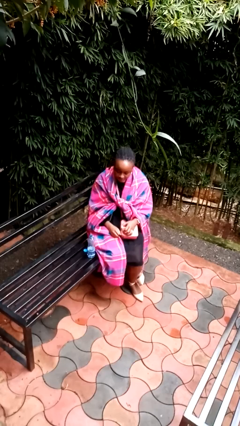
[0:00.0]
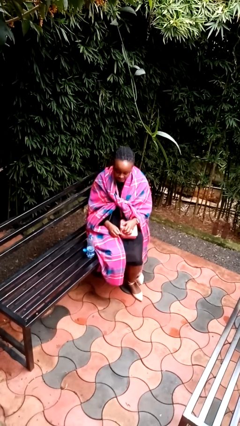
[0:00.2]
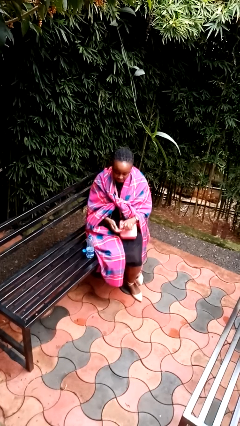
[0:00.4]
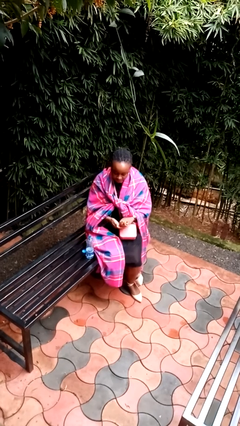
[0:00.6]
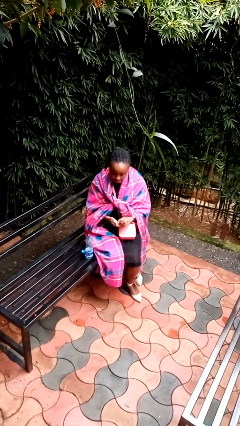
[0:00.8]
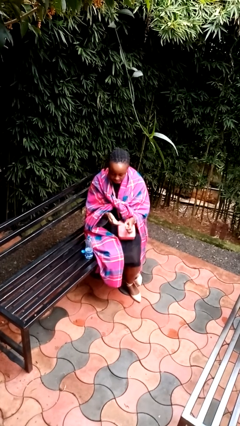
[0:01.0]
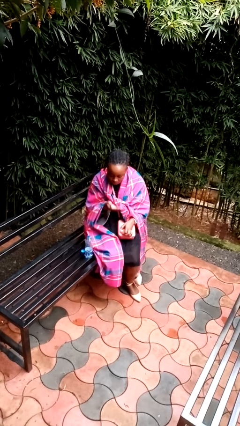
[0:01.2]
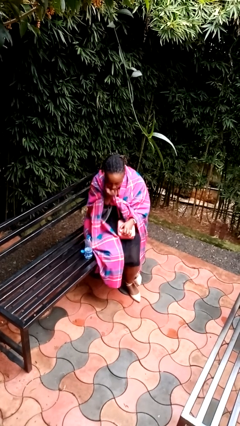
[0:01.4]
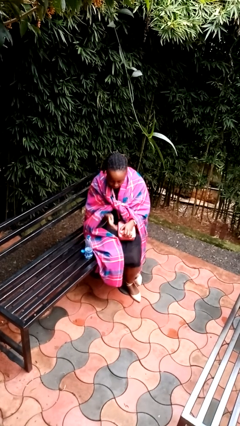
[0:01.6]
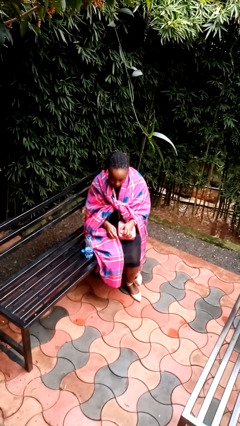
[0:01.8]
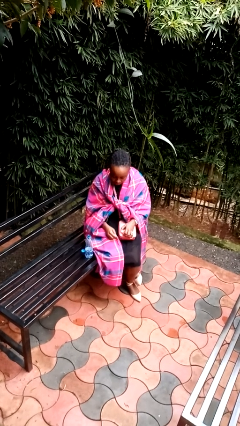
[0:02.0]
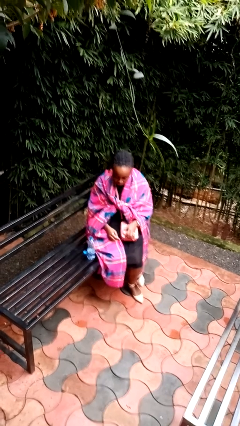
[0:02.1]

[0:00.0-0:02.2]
person takes medicine pills

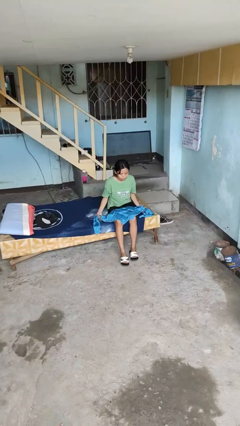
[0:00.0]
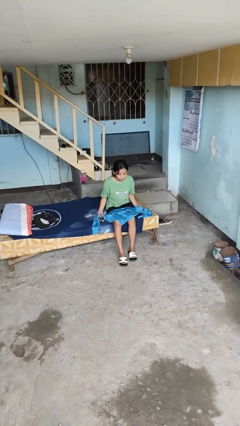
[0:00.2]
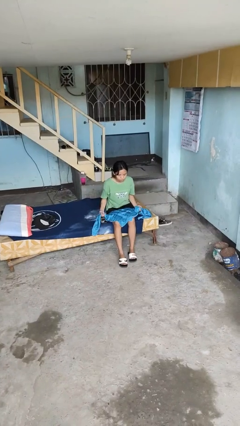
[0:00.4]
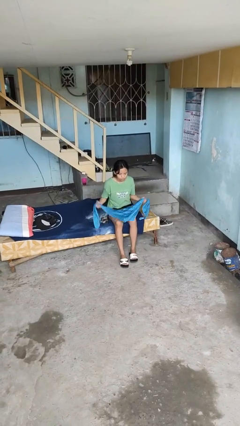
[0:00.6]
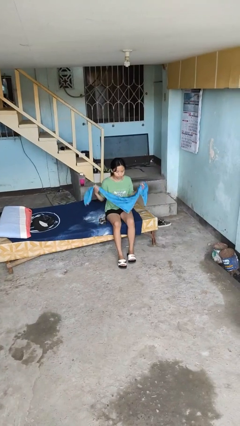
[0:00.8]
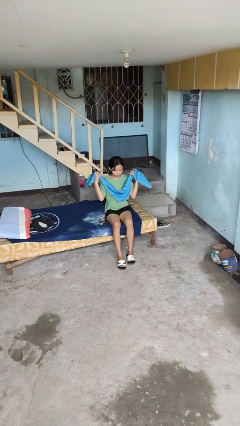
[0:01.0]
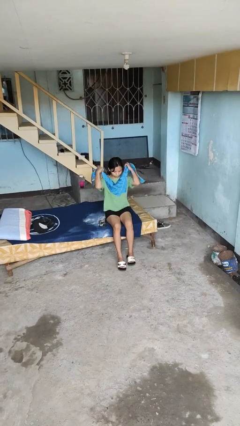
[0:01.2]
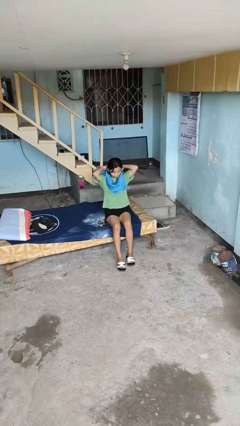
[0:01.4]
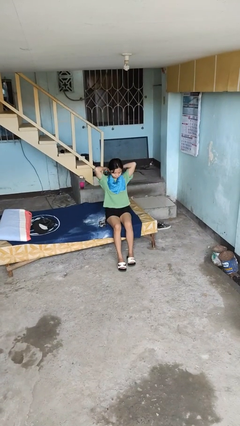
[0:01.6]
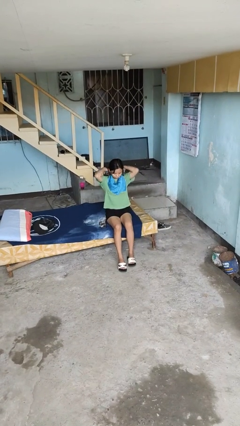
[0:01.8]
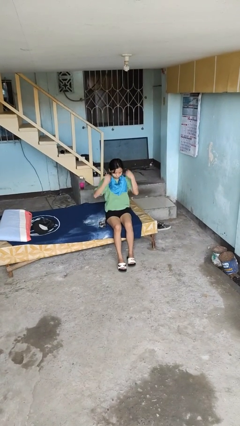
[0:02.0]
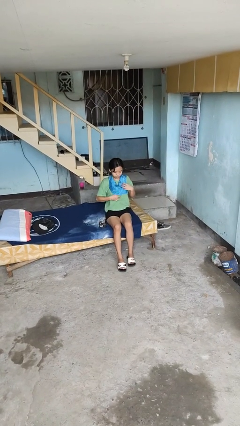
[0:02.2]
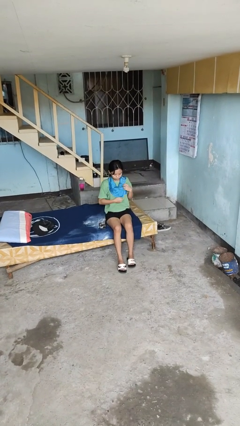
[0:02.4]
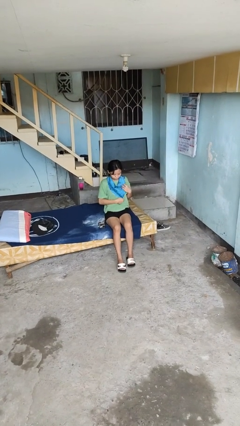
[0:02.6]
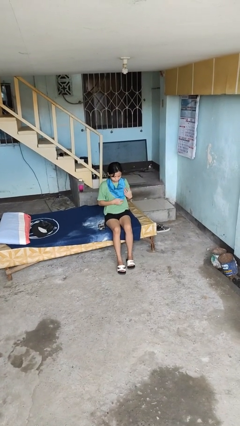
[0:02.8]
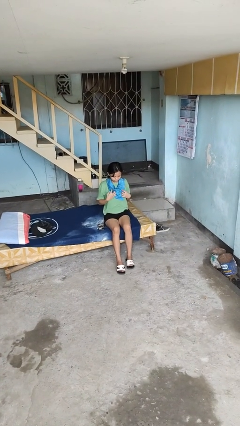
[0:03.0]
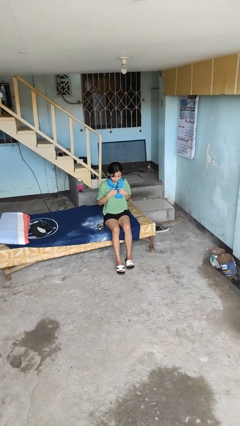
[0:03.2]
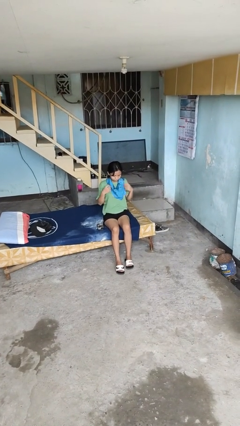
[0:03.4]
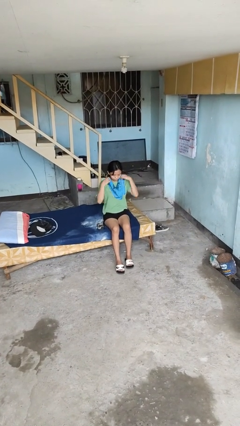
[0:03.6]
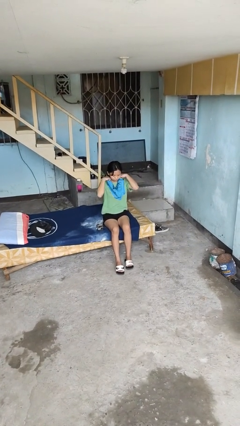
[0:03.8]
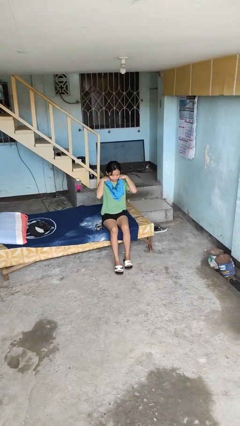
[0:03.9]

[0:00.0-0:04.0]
person puts on scarf

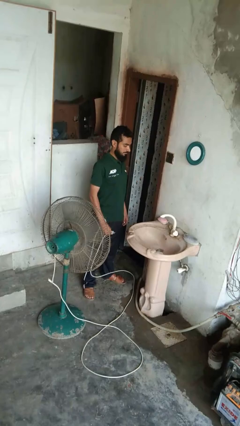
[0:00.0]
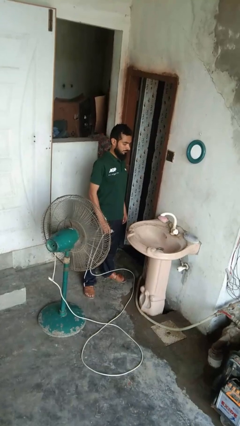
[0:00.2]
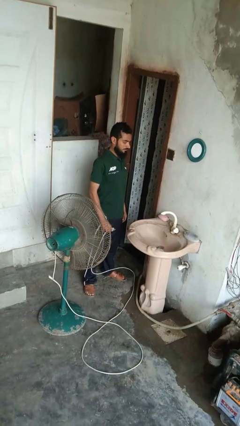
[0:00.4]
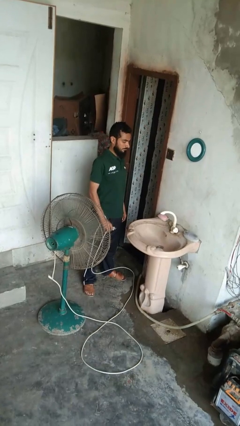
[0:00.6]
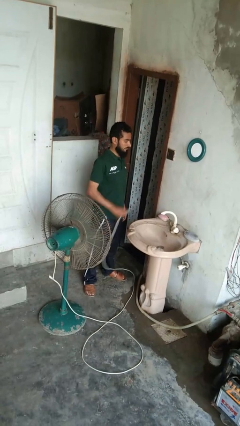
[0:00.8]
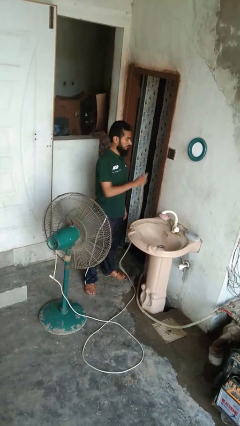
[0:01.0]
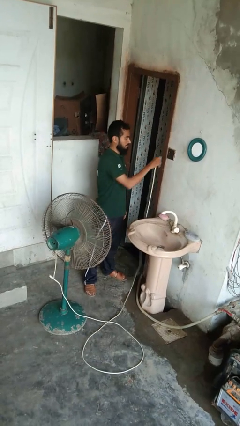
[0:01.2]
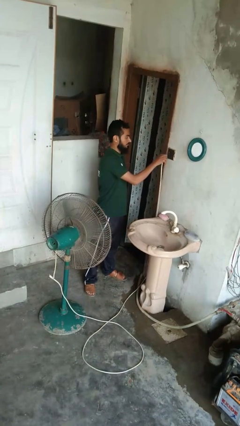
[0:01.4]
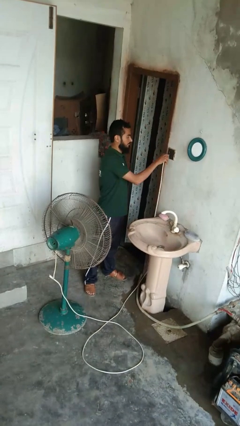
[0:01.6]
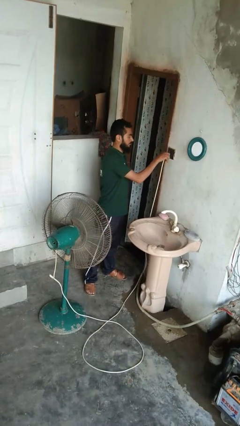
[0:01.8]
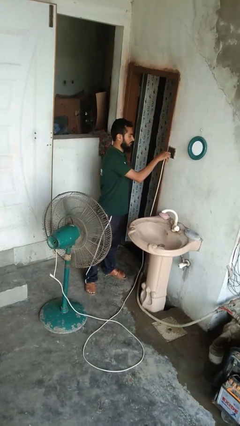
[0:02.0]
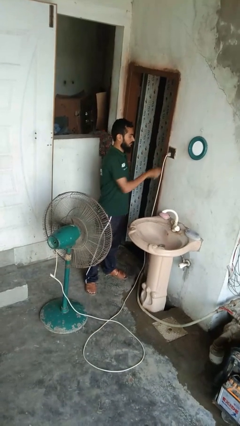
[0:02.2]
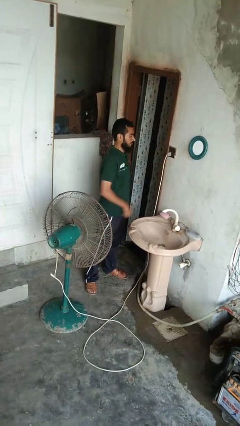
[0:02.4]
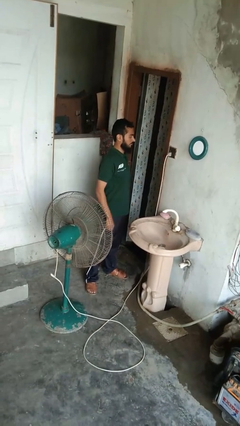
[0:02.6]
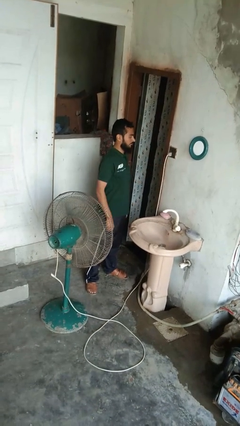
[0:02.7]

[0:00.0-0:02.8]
person turns on fan

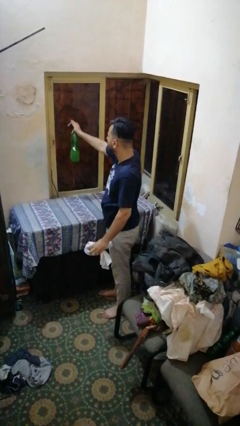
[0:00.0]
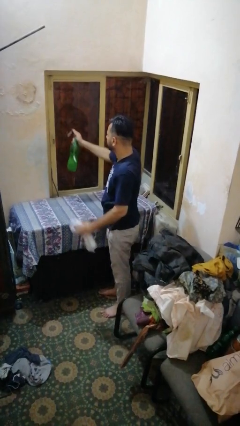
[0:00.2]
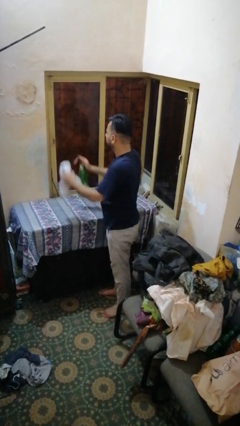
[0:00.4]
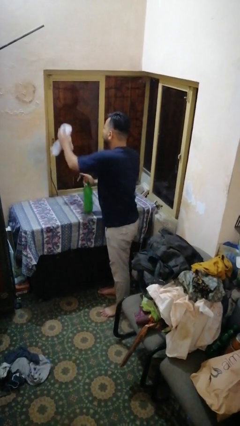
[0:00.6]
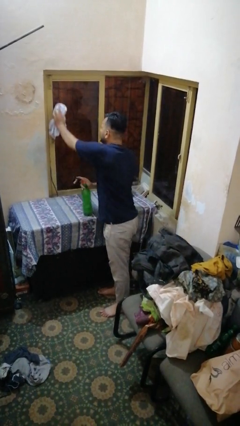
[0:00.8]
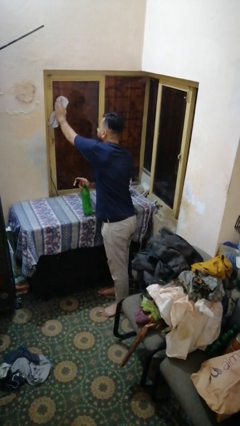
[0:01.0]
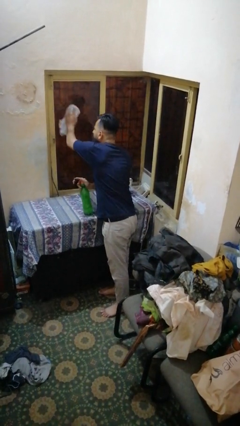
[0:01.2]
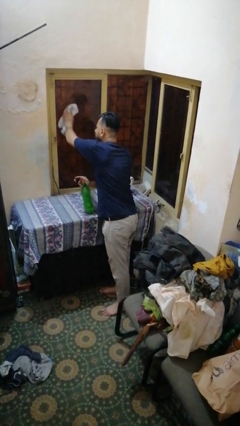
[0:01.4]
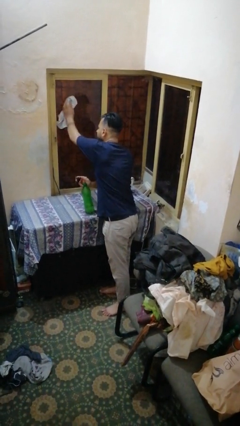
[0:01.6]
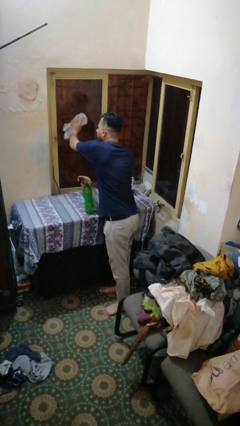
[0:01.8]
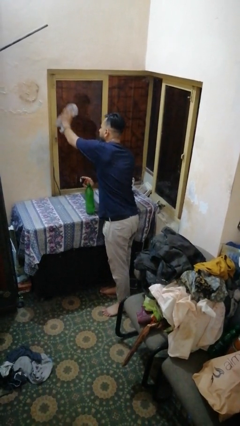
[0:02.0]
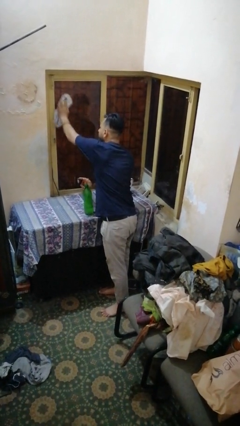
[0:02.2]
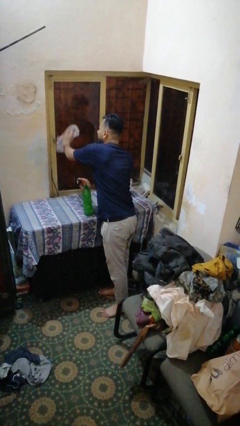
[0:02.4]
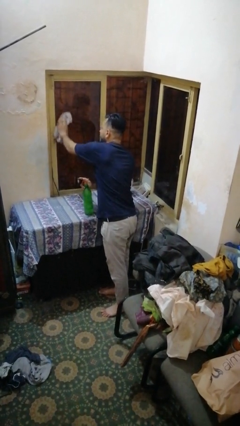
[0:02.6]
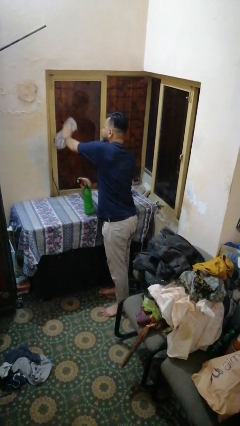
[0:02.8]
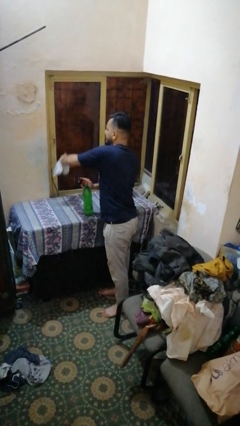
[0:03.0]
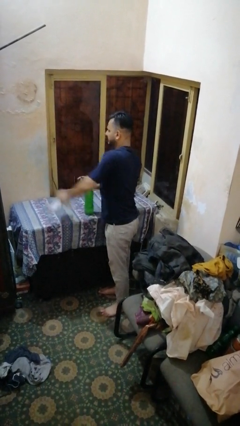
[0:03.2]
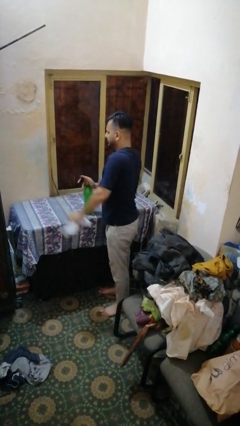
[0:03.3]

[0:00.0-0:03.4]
person washes window

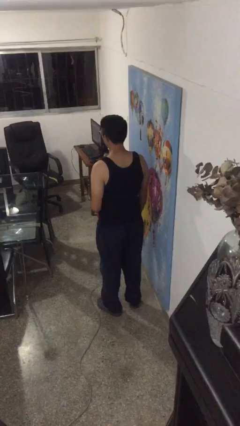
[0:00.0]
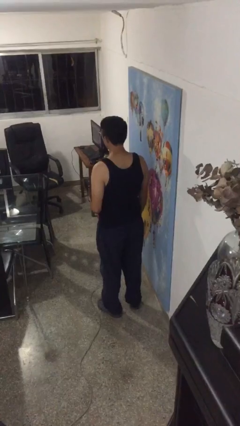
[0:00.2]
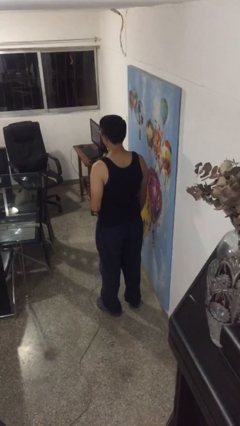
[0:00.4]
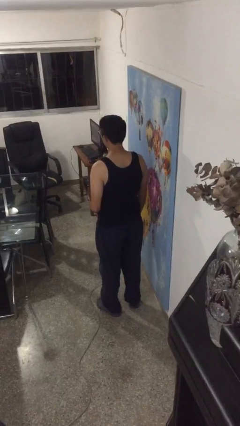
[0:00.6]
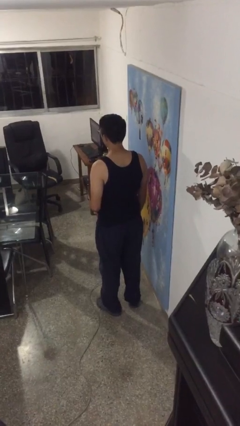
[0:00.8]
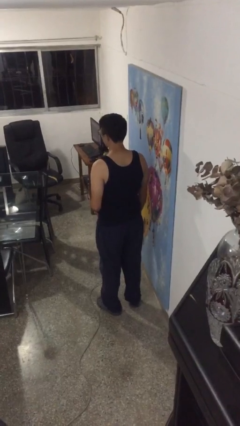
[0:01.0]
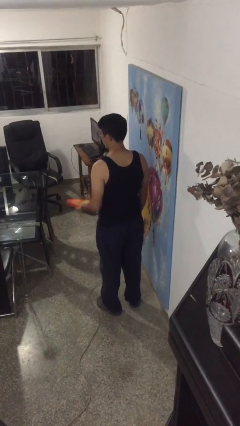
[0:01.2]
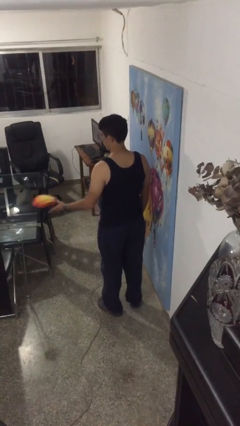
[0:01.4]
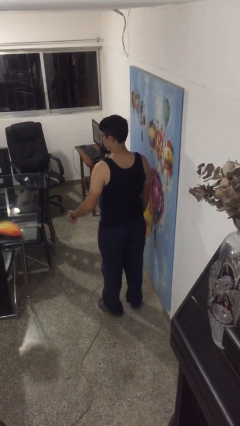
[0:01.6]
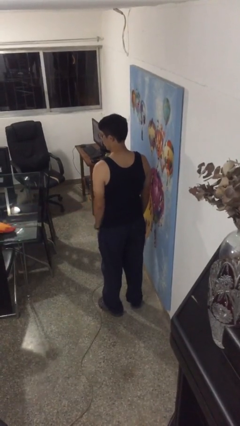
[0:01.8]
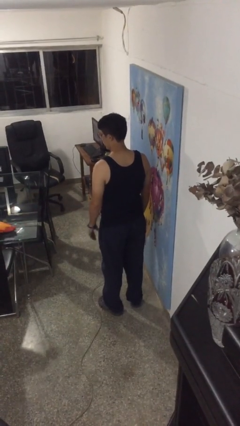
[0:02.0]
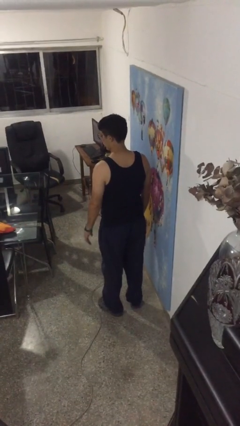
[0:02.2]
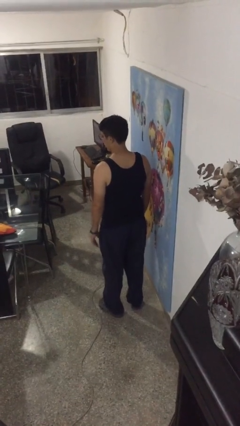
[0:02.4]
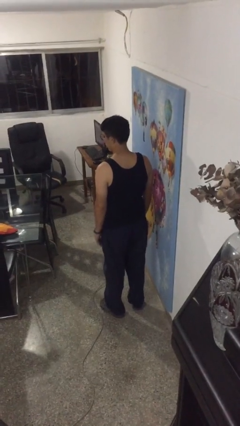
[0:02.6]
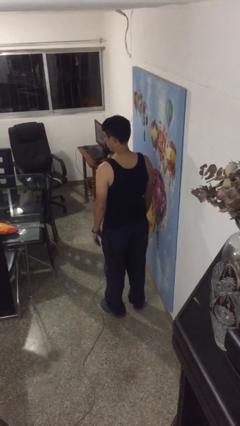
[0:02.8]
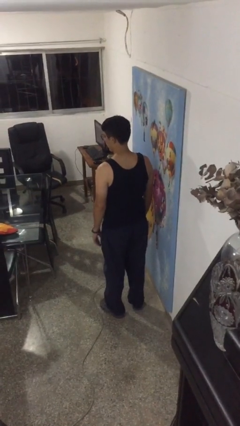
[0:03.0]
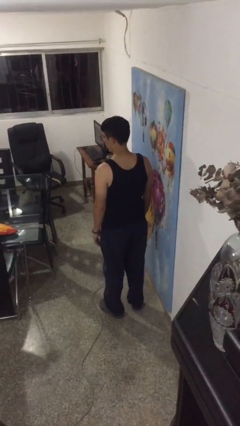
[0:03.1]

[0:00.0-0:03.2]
person throws object on table

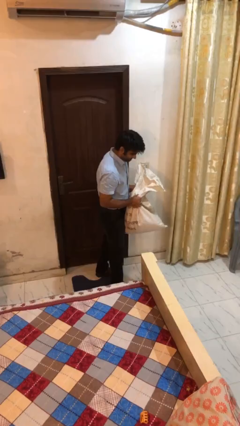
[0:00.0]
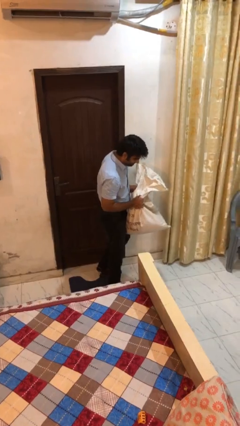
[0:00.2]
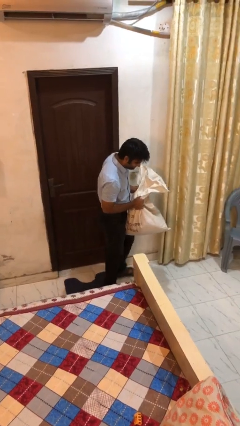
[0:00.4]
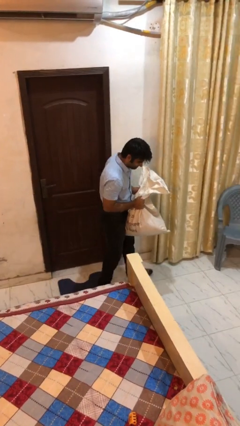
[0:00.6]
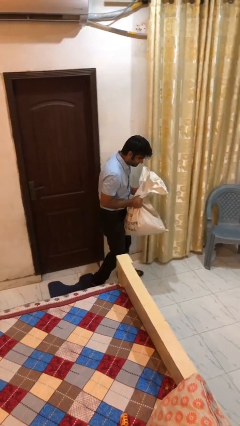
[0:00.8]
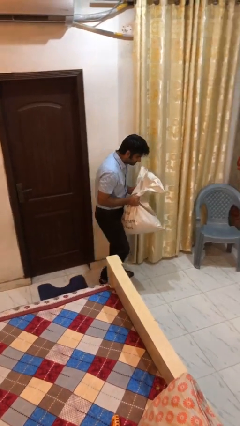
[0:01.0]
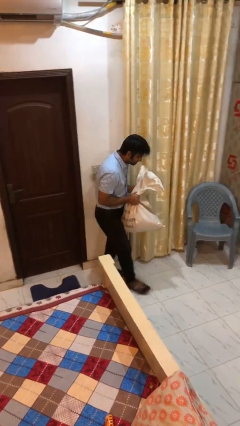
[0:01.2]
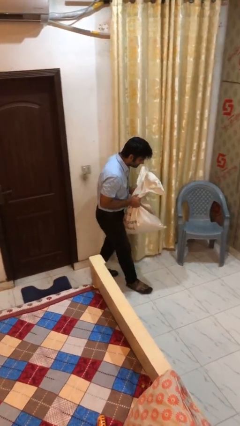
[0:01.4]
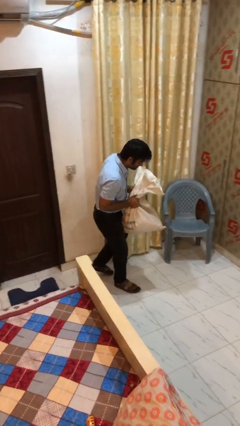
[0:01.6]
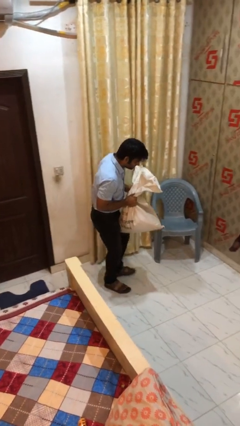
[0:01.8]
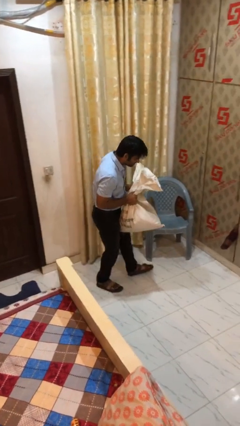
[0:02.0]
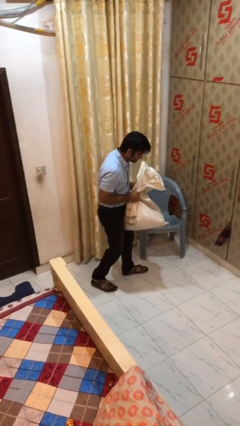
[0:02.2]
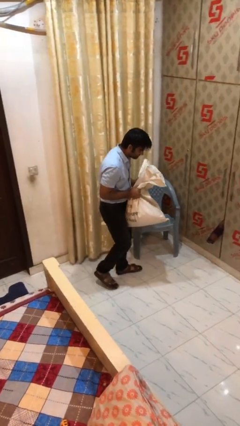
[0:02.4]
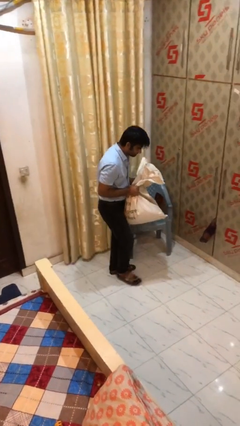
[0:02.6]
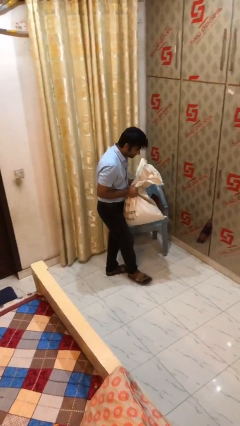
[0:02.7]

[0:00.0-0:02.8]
person carries heavy object
